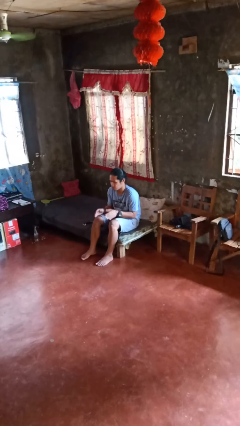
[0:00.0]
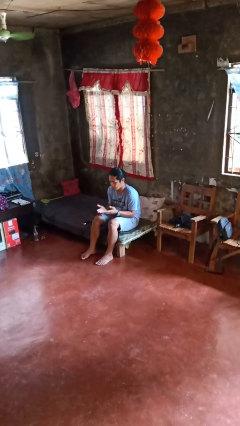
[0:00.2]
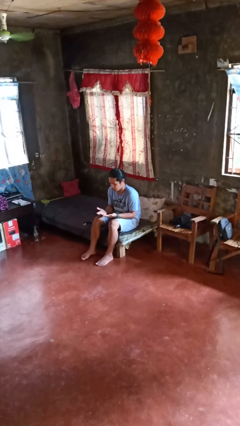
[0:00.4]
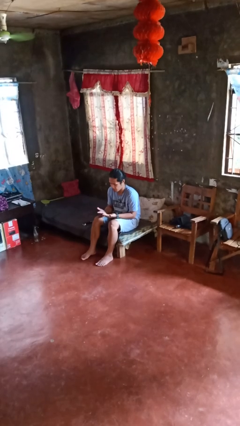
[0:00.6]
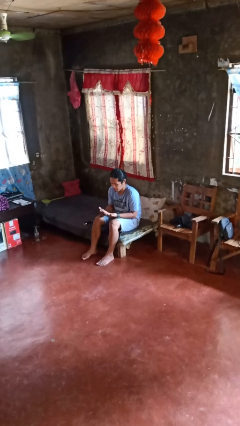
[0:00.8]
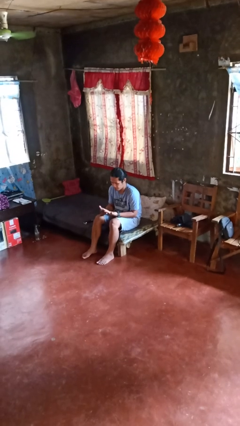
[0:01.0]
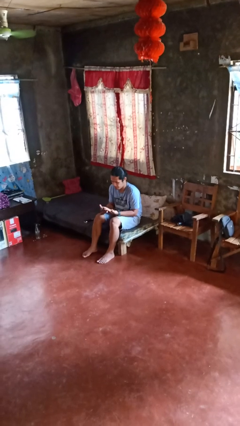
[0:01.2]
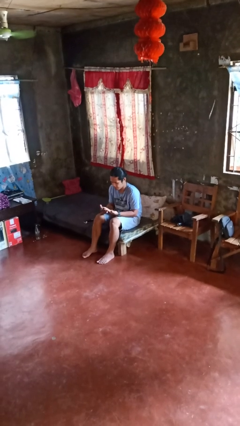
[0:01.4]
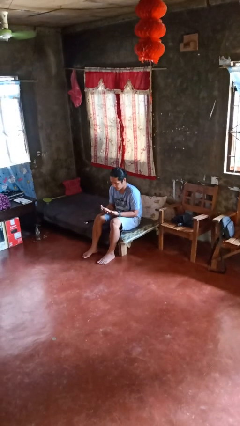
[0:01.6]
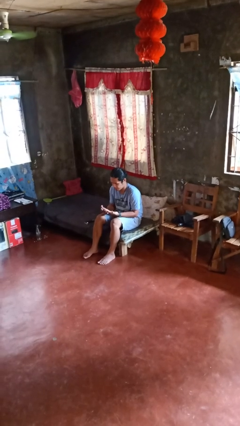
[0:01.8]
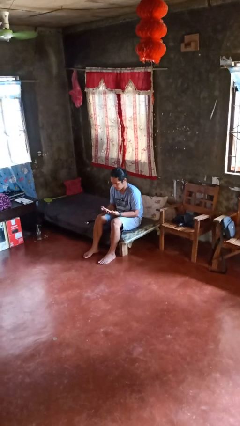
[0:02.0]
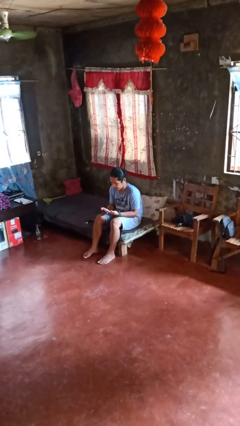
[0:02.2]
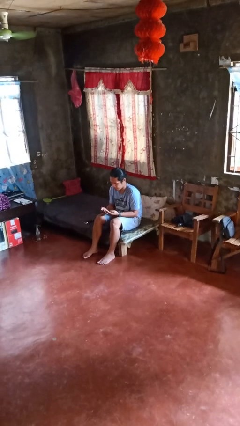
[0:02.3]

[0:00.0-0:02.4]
person looks at hands in lap

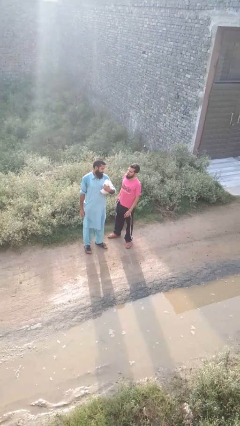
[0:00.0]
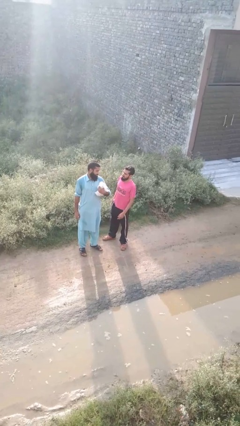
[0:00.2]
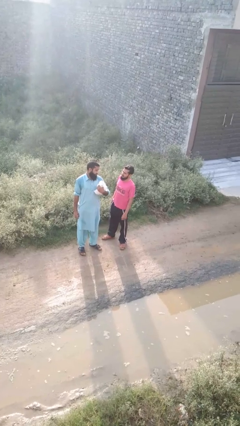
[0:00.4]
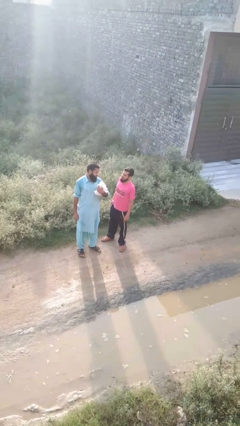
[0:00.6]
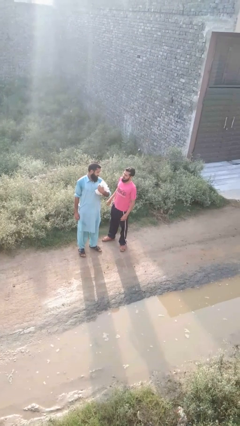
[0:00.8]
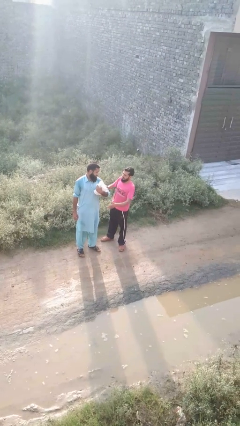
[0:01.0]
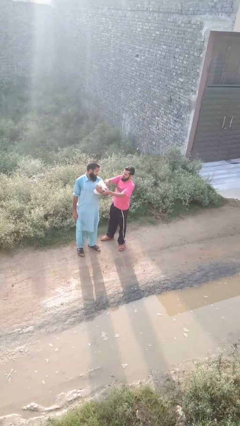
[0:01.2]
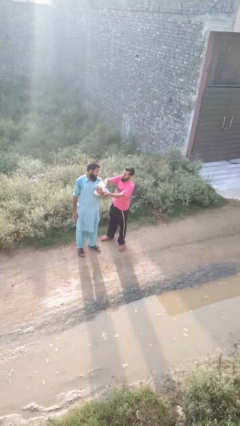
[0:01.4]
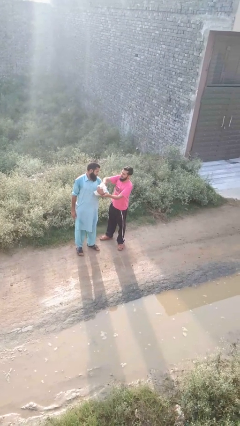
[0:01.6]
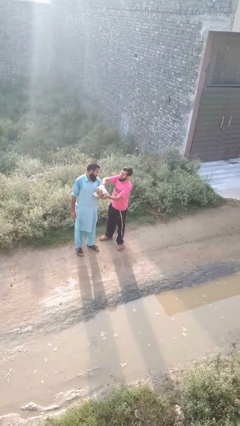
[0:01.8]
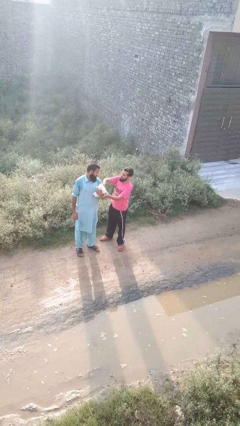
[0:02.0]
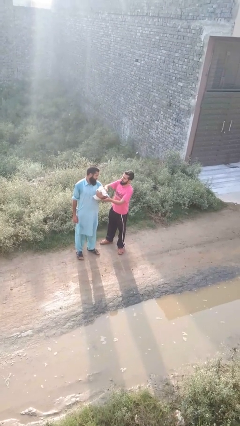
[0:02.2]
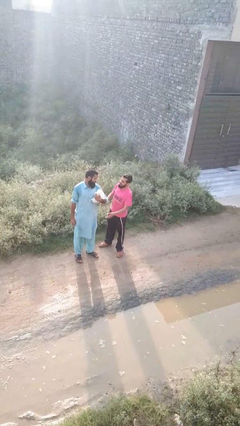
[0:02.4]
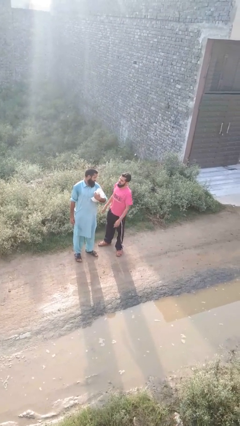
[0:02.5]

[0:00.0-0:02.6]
person grabs person by bicep

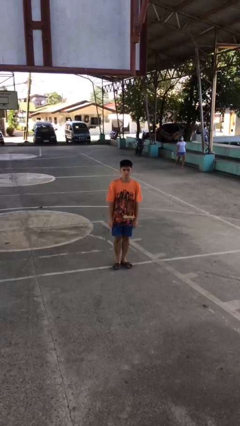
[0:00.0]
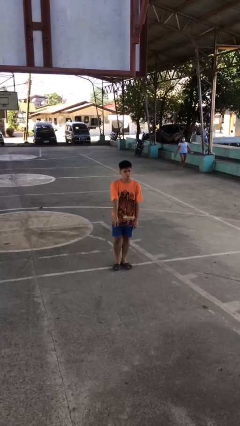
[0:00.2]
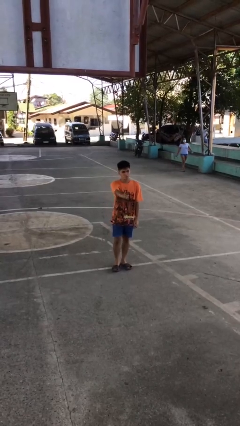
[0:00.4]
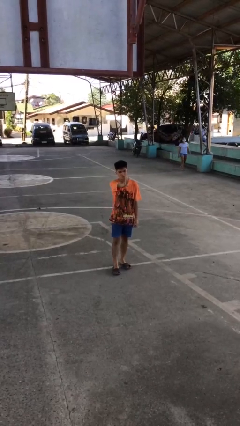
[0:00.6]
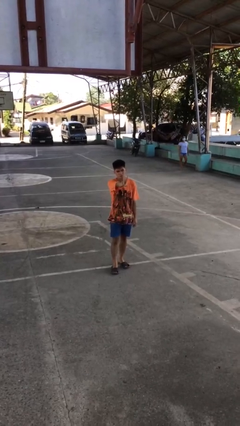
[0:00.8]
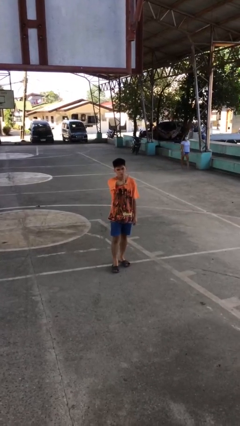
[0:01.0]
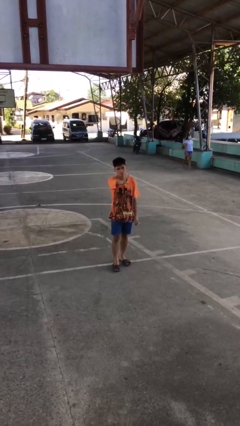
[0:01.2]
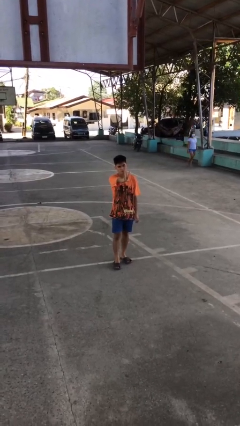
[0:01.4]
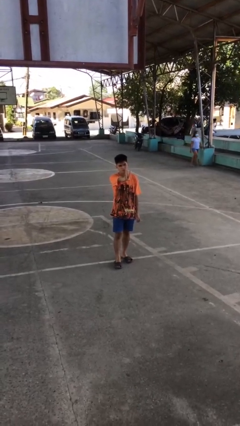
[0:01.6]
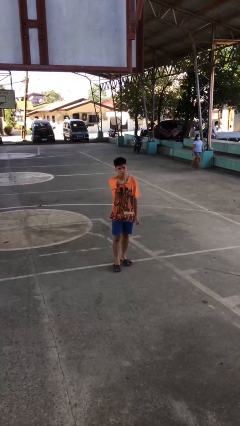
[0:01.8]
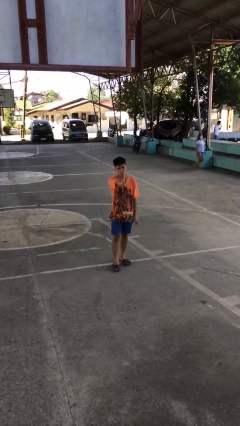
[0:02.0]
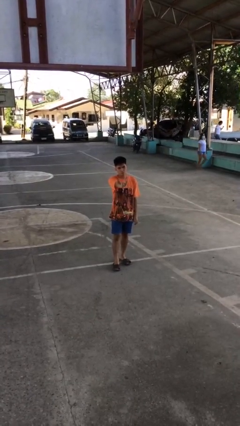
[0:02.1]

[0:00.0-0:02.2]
person gestures peace

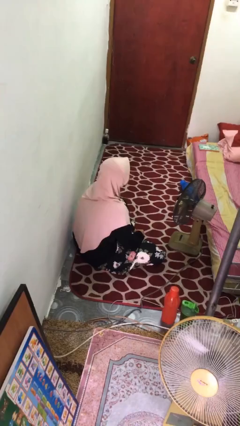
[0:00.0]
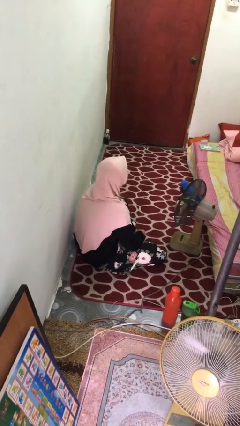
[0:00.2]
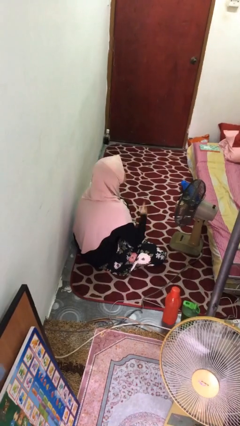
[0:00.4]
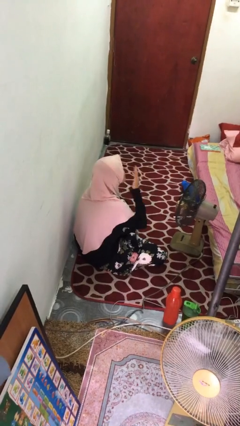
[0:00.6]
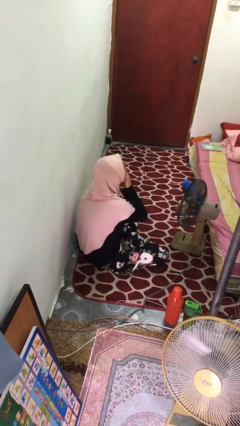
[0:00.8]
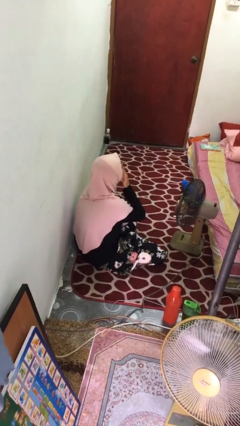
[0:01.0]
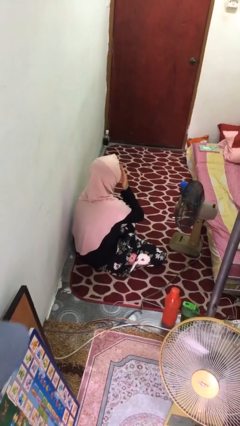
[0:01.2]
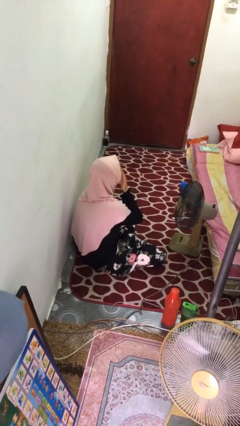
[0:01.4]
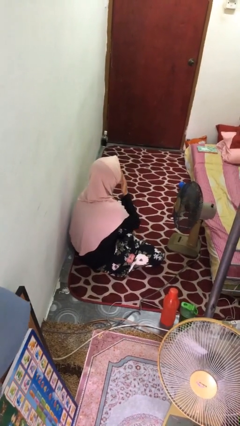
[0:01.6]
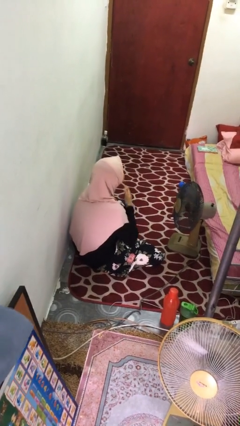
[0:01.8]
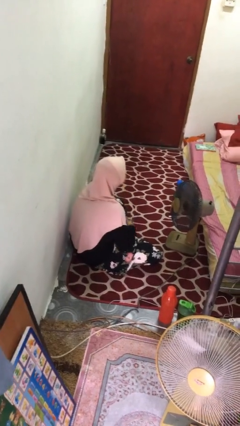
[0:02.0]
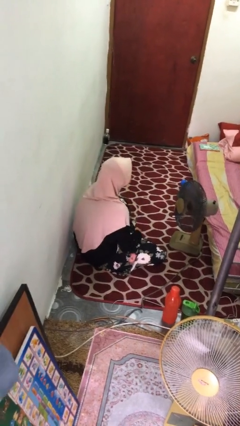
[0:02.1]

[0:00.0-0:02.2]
person yawns

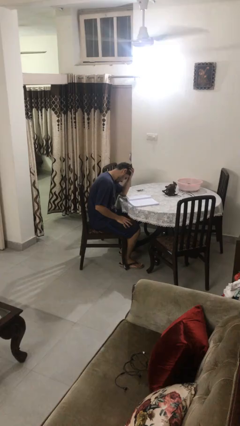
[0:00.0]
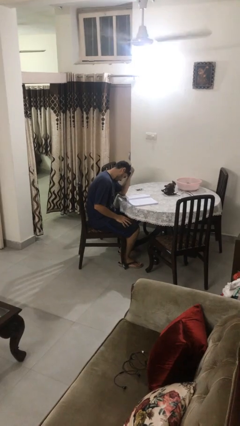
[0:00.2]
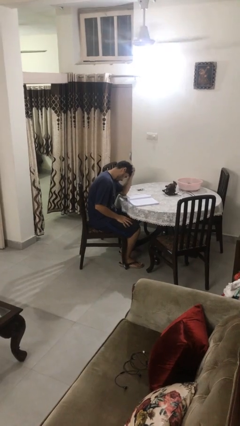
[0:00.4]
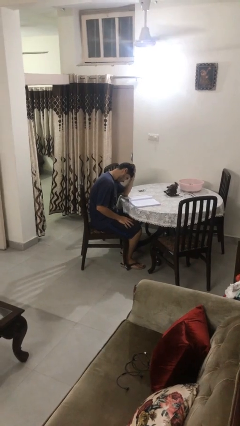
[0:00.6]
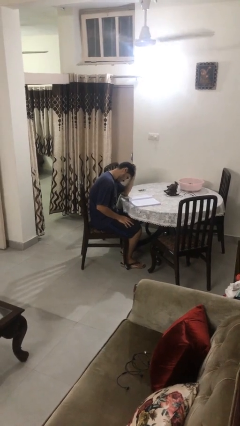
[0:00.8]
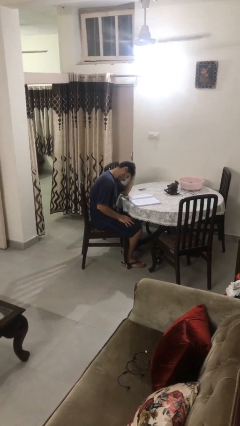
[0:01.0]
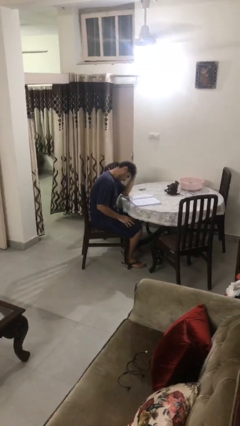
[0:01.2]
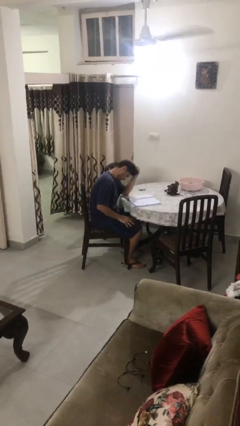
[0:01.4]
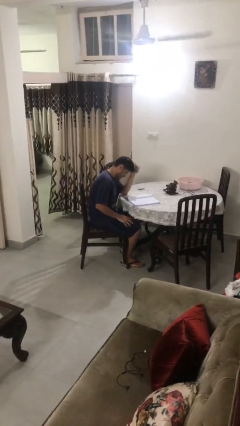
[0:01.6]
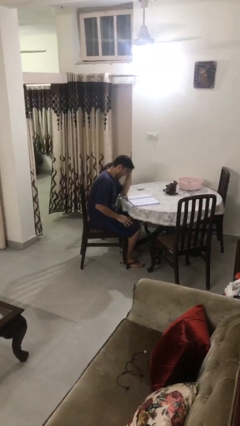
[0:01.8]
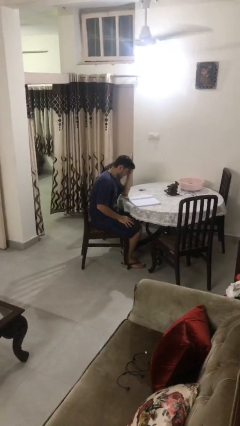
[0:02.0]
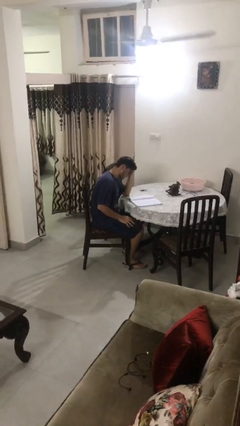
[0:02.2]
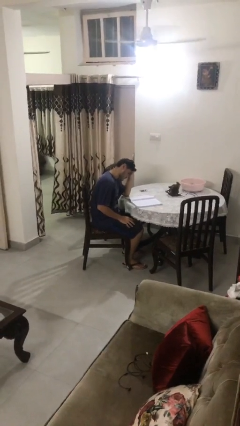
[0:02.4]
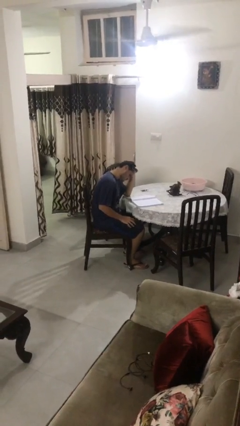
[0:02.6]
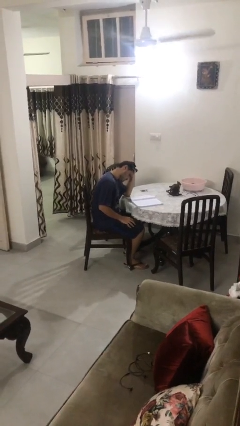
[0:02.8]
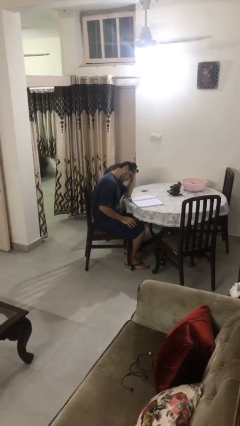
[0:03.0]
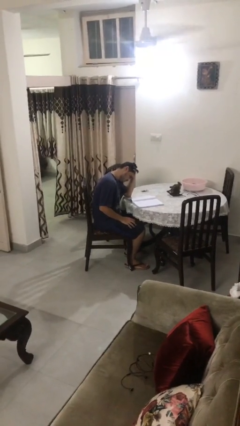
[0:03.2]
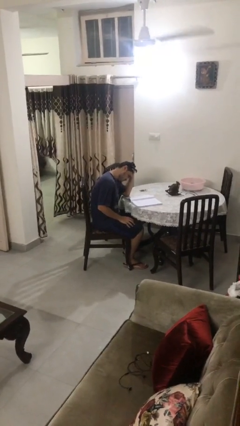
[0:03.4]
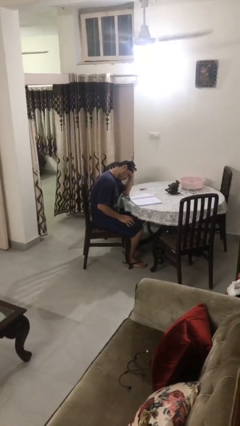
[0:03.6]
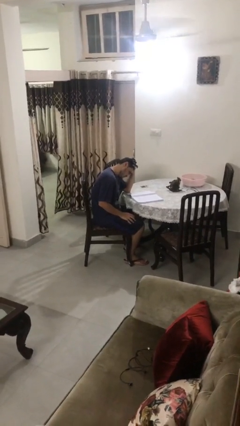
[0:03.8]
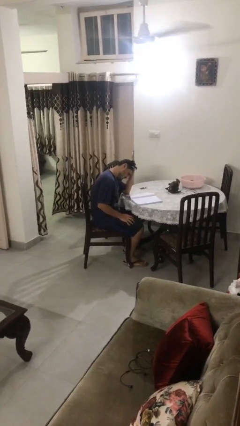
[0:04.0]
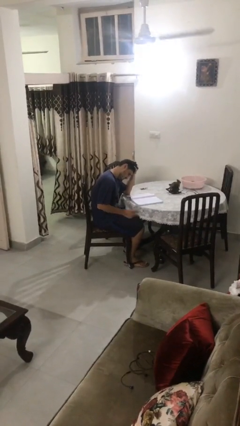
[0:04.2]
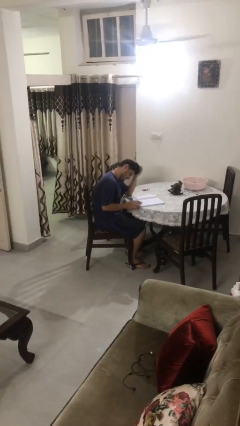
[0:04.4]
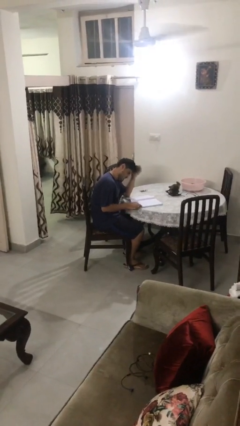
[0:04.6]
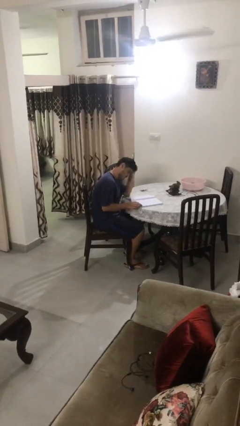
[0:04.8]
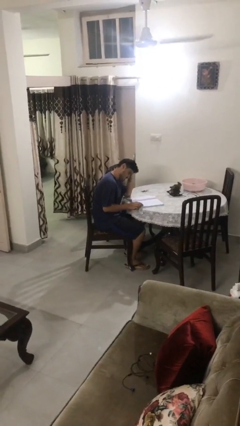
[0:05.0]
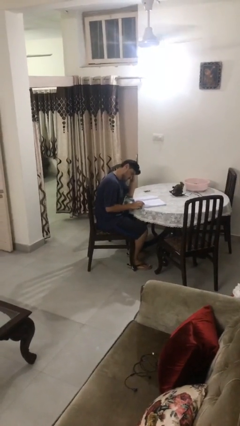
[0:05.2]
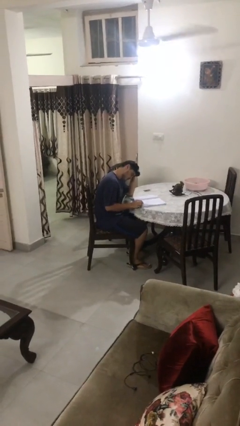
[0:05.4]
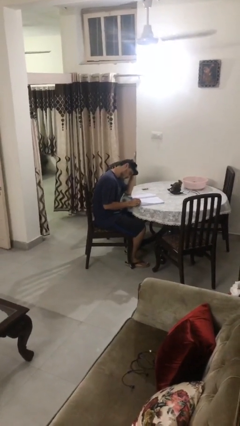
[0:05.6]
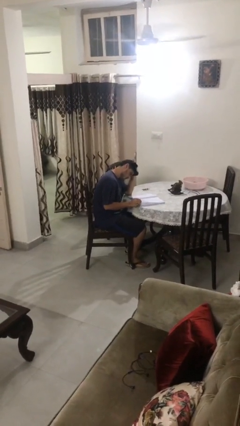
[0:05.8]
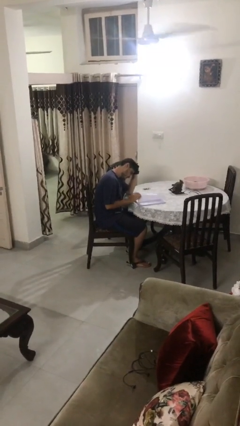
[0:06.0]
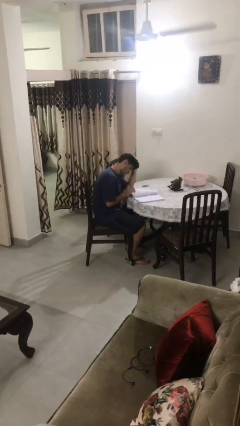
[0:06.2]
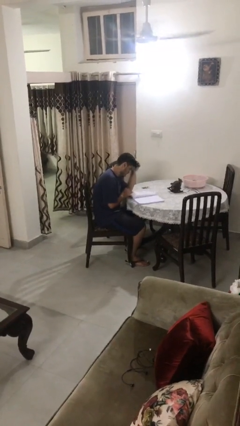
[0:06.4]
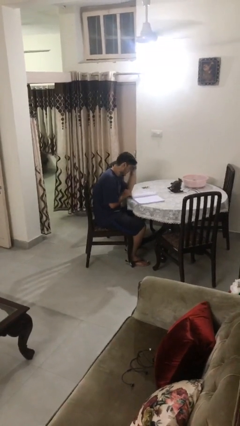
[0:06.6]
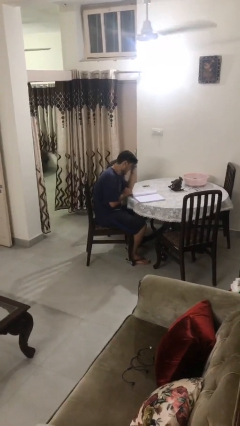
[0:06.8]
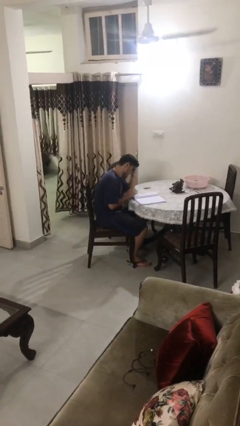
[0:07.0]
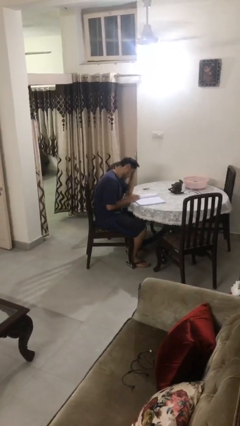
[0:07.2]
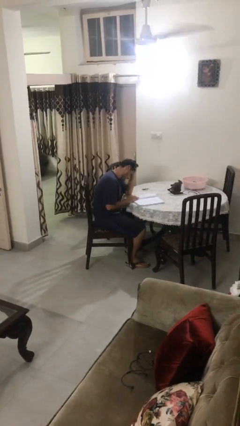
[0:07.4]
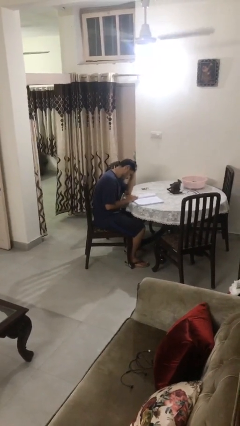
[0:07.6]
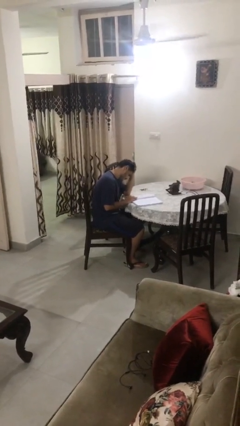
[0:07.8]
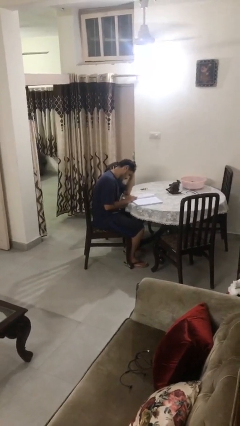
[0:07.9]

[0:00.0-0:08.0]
person reads document

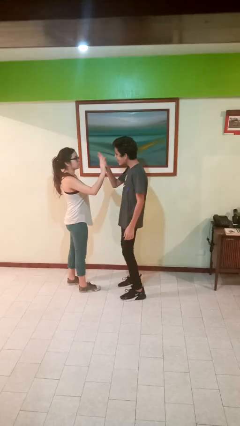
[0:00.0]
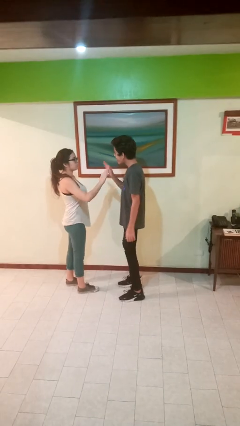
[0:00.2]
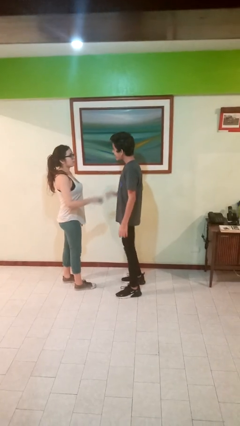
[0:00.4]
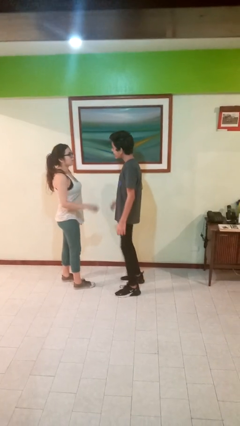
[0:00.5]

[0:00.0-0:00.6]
person highfives hand
